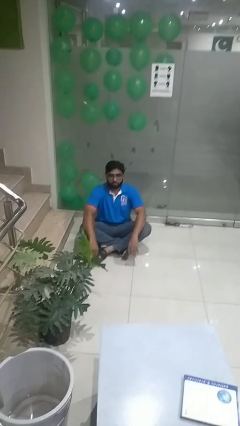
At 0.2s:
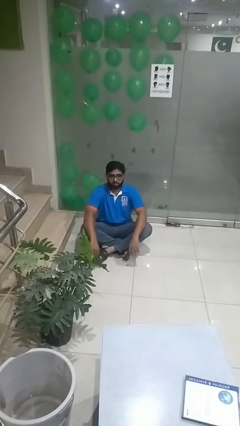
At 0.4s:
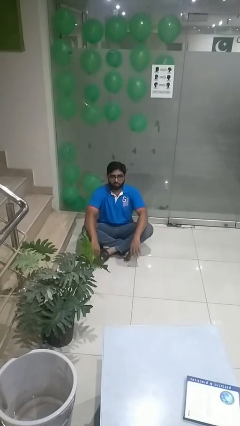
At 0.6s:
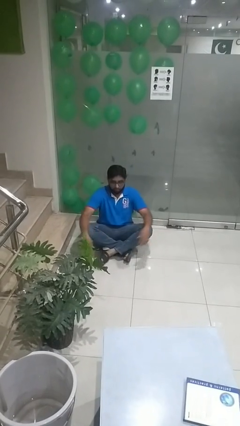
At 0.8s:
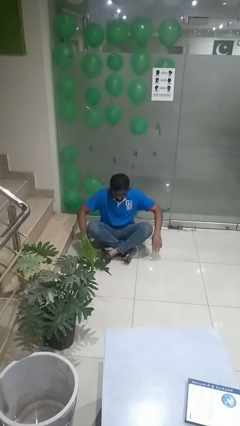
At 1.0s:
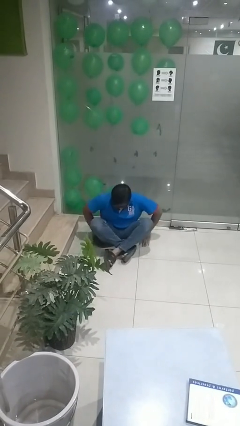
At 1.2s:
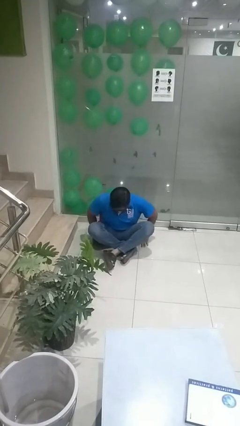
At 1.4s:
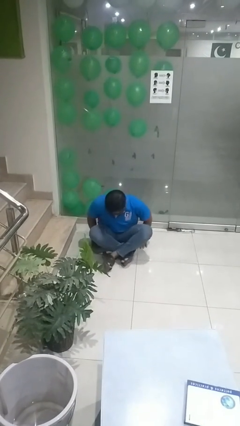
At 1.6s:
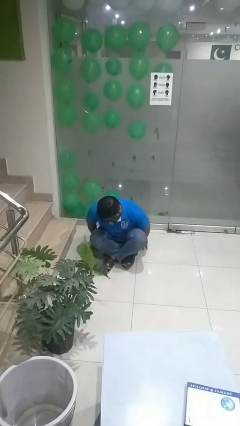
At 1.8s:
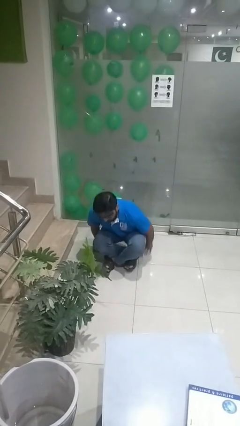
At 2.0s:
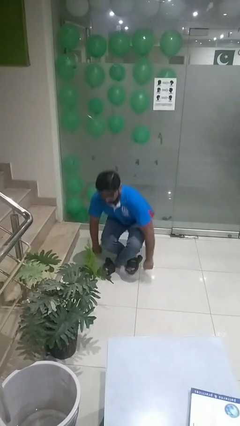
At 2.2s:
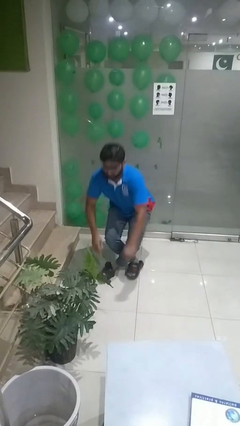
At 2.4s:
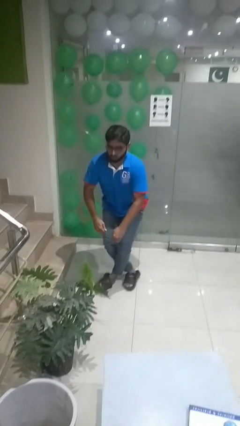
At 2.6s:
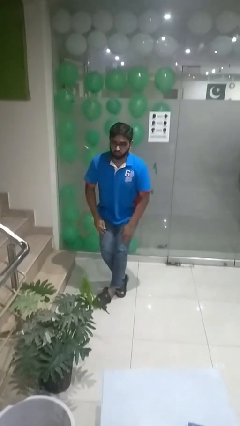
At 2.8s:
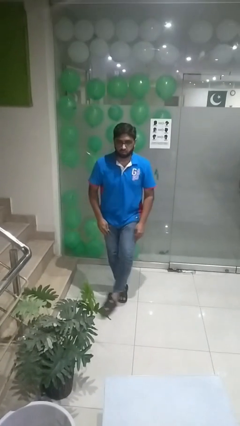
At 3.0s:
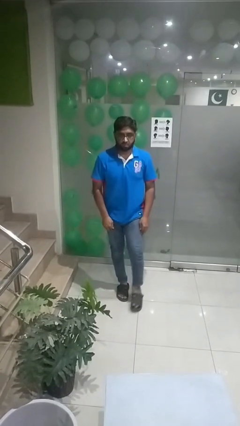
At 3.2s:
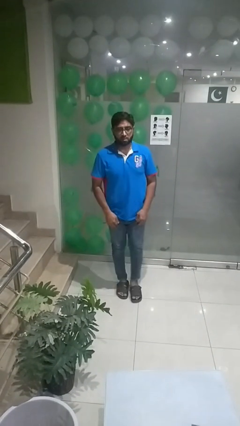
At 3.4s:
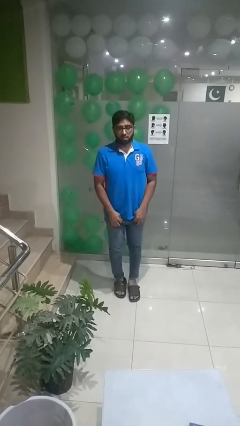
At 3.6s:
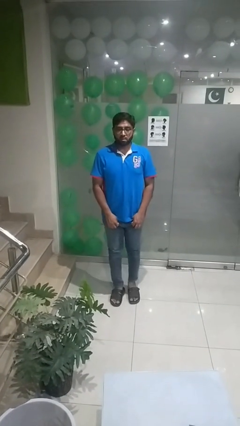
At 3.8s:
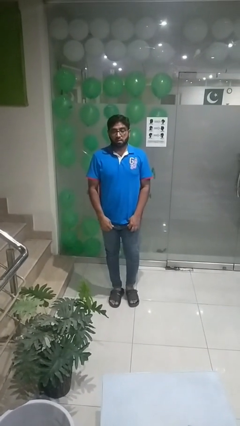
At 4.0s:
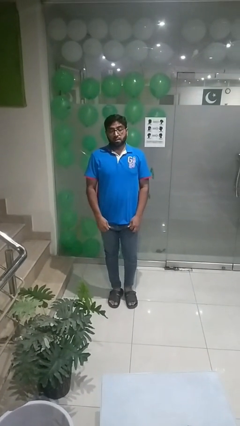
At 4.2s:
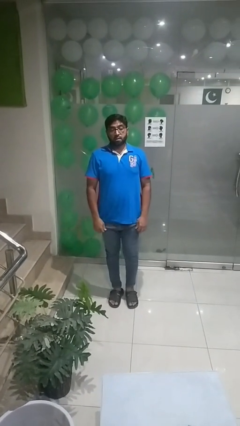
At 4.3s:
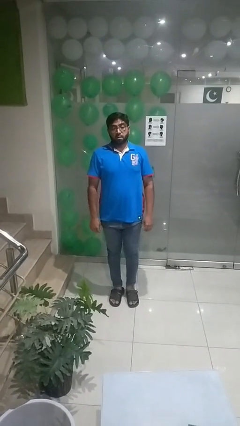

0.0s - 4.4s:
person stands up from floor

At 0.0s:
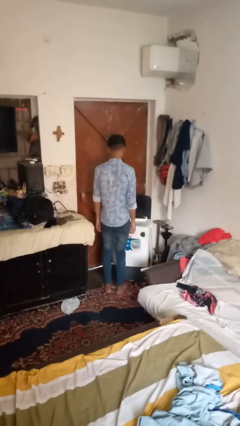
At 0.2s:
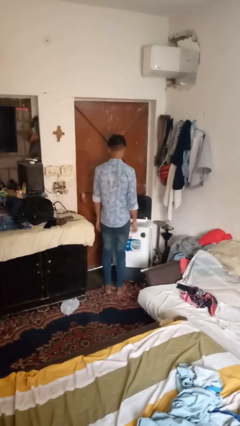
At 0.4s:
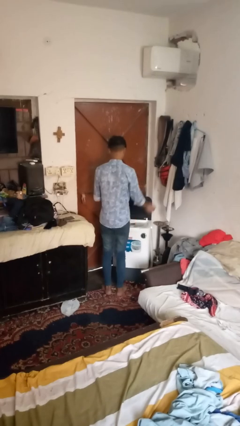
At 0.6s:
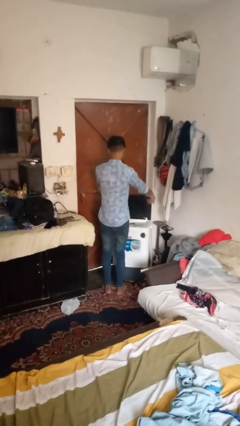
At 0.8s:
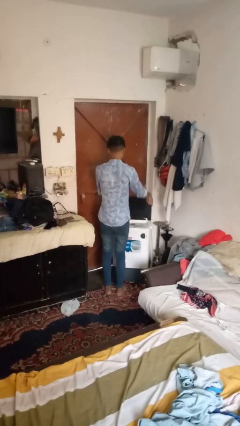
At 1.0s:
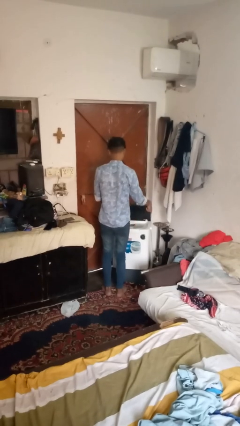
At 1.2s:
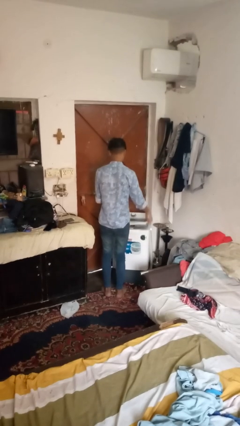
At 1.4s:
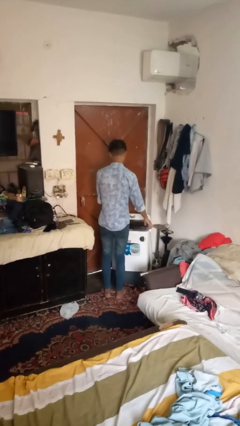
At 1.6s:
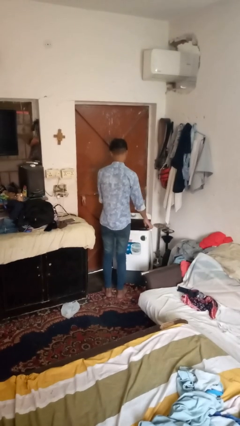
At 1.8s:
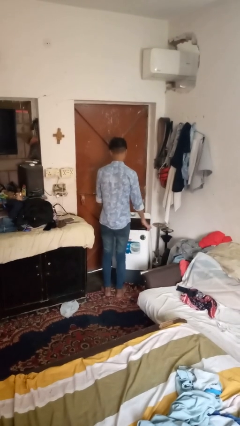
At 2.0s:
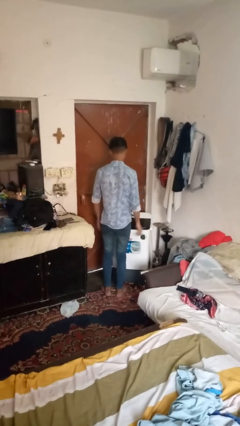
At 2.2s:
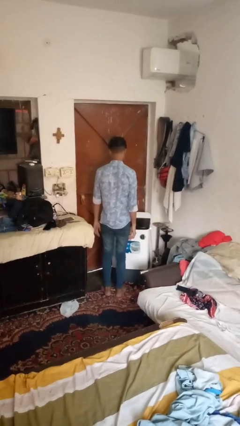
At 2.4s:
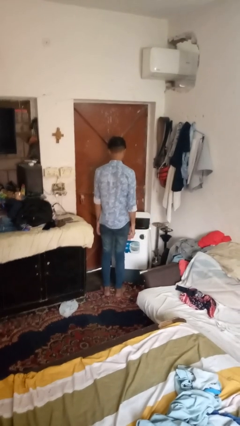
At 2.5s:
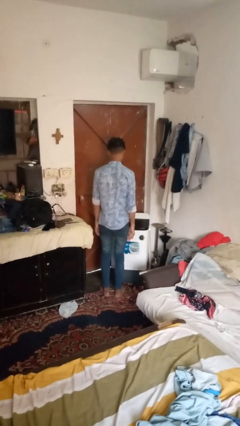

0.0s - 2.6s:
person closes clothes washer

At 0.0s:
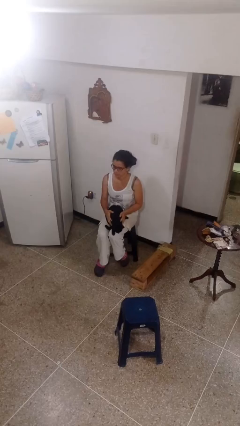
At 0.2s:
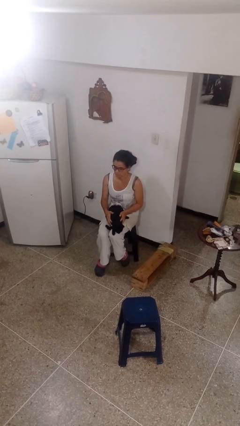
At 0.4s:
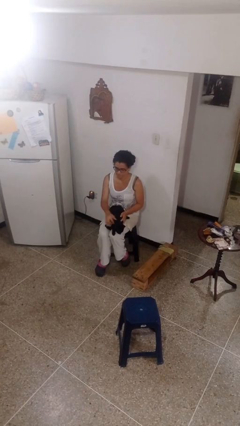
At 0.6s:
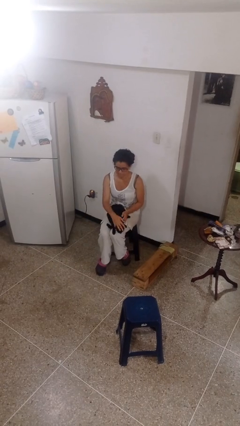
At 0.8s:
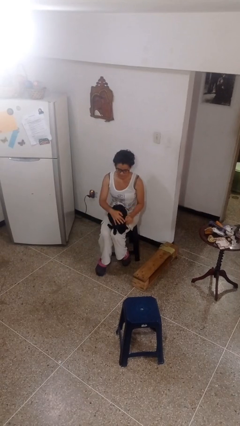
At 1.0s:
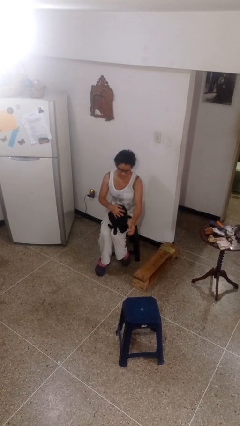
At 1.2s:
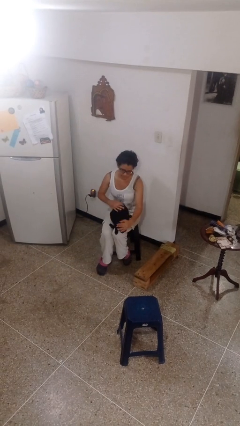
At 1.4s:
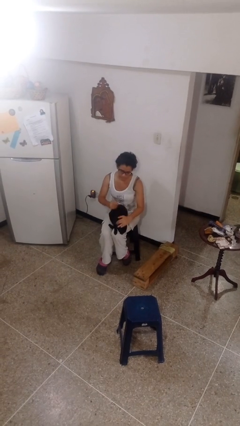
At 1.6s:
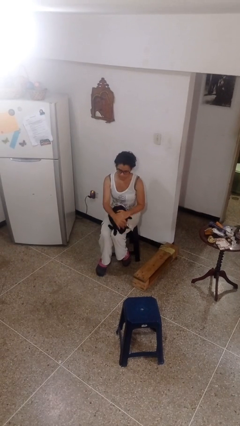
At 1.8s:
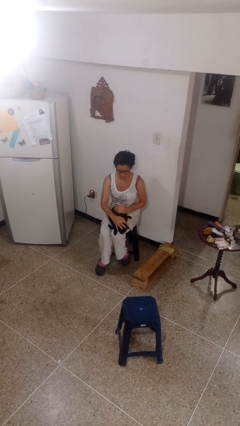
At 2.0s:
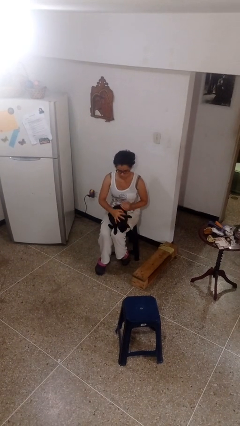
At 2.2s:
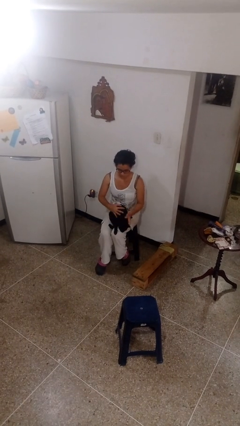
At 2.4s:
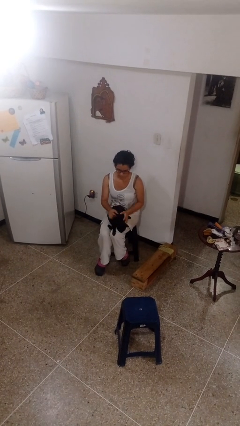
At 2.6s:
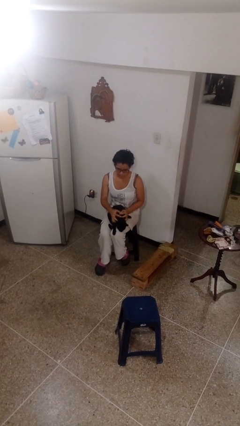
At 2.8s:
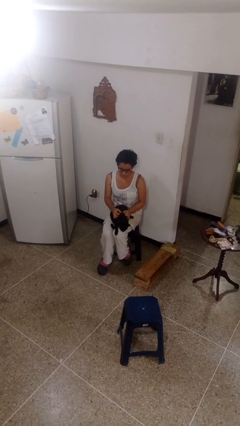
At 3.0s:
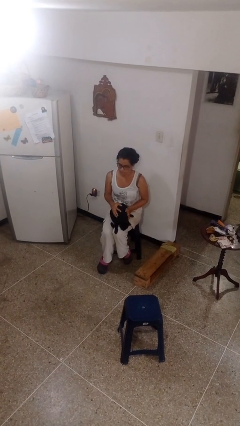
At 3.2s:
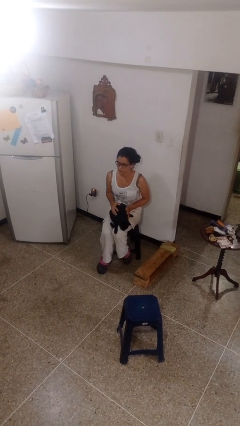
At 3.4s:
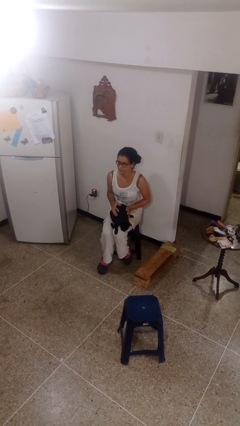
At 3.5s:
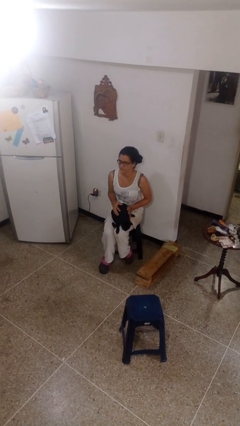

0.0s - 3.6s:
person pets cat

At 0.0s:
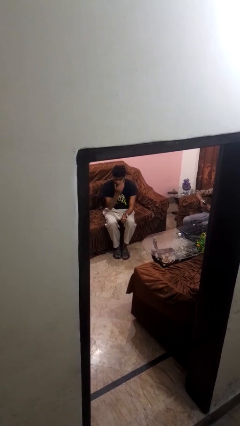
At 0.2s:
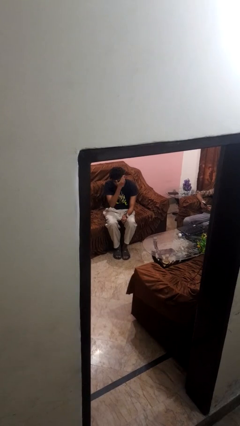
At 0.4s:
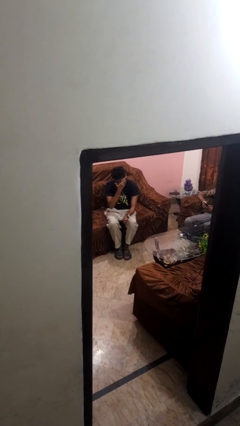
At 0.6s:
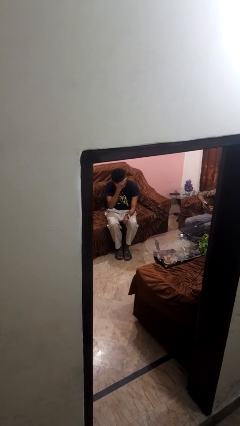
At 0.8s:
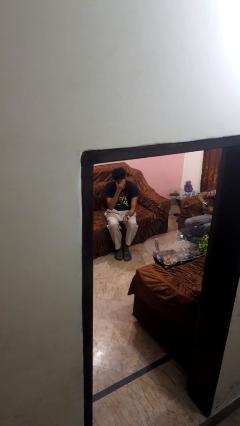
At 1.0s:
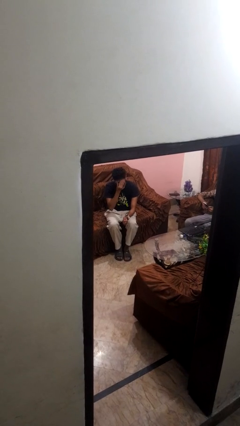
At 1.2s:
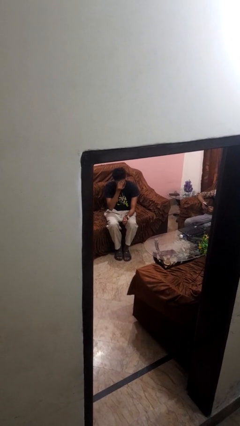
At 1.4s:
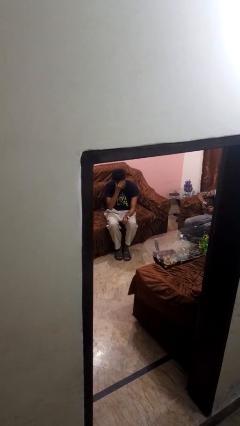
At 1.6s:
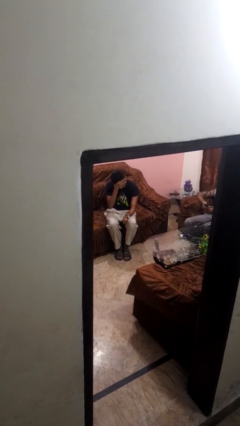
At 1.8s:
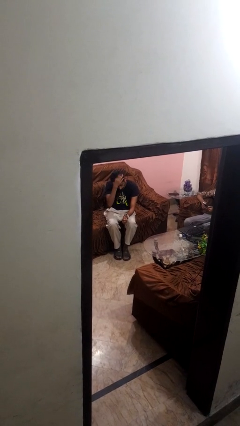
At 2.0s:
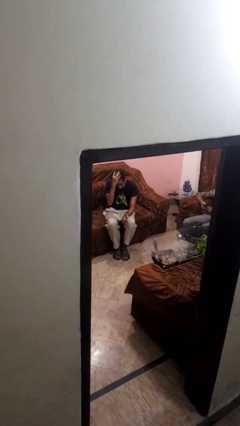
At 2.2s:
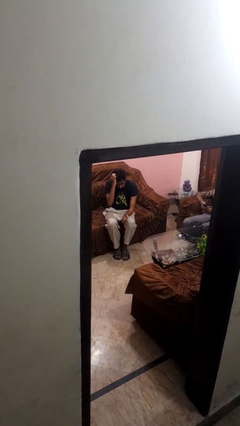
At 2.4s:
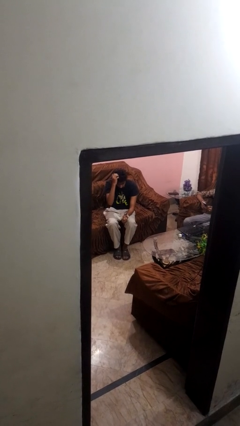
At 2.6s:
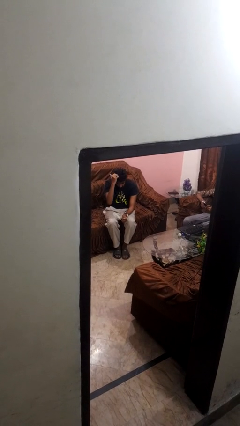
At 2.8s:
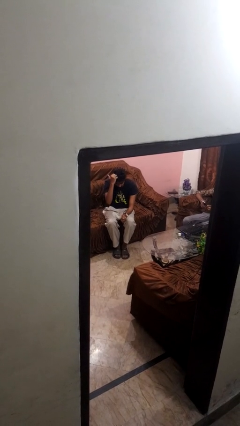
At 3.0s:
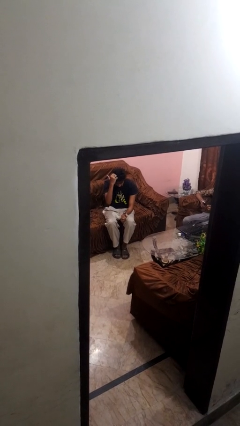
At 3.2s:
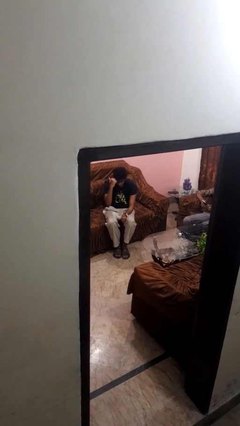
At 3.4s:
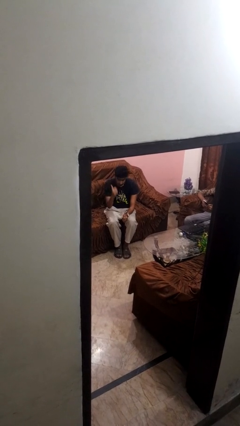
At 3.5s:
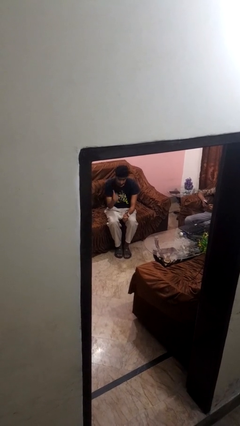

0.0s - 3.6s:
person scratches face

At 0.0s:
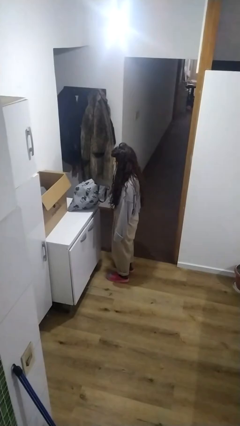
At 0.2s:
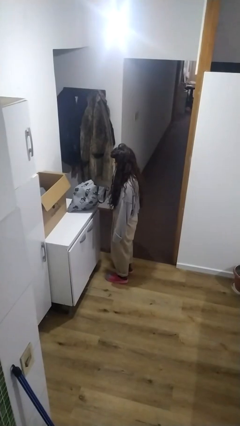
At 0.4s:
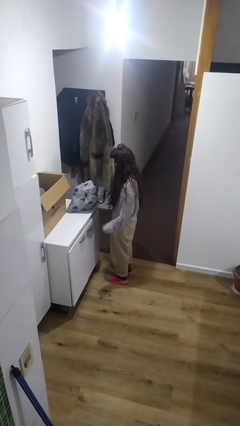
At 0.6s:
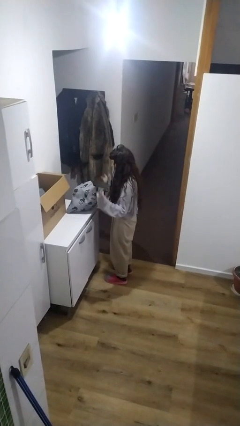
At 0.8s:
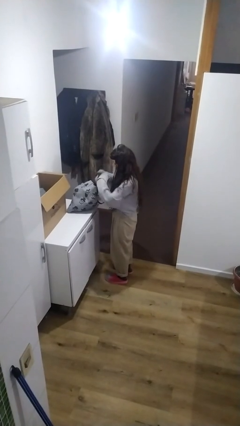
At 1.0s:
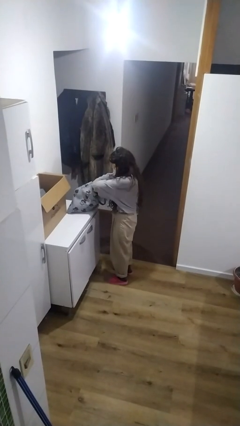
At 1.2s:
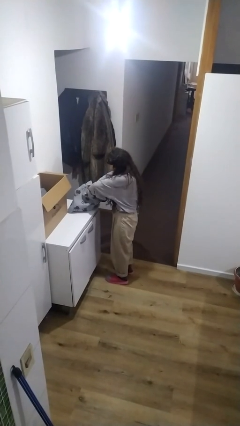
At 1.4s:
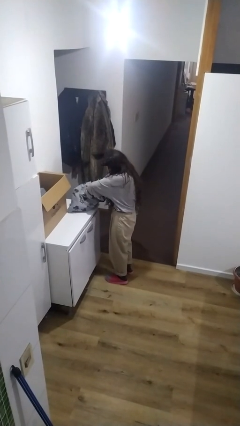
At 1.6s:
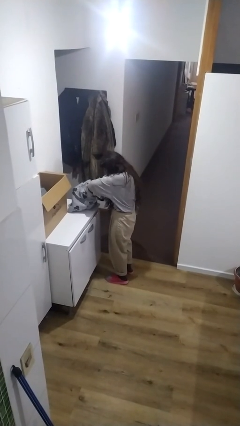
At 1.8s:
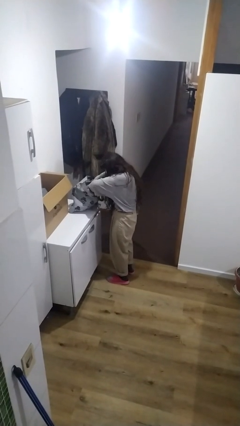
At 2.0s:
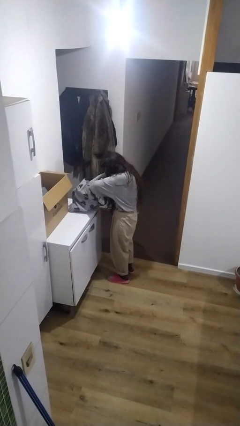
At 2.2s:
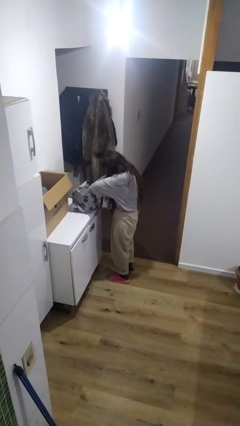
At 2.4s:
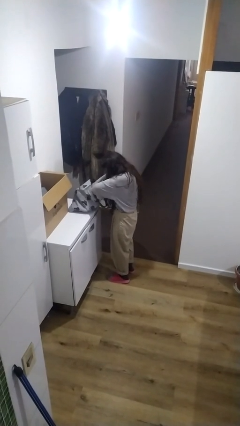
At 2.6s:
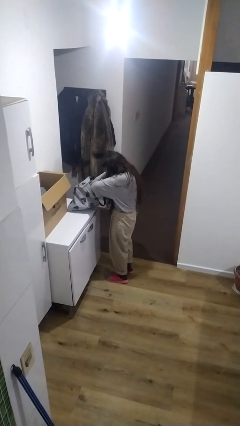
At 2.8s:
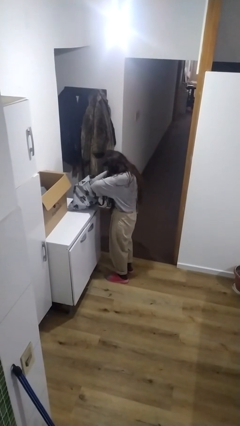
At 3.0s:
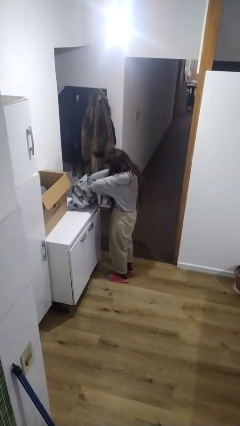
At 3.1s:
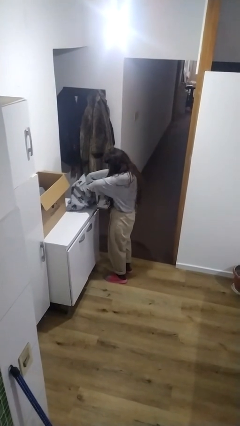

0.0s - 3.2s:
person searches in bag

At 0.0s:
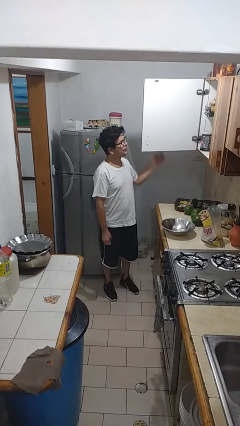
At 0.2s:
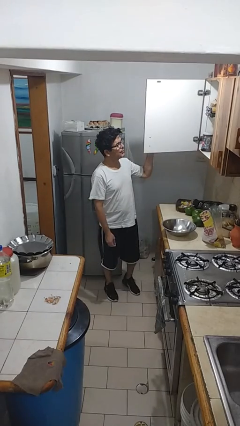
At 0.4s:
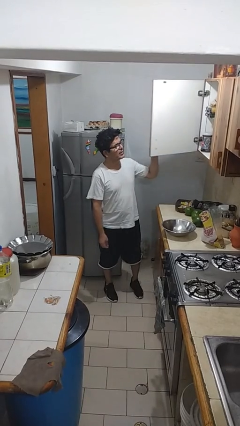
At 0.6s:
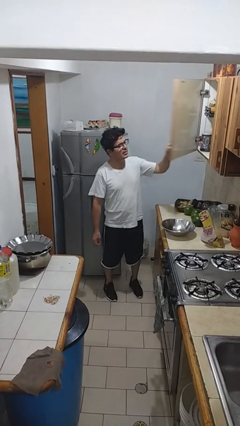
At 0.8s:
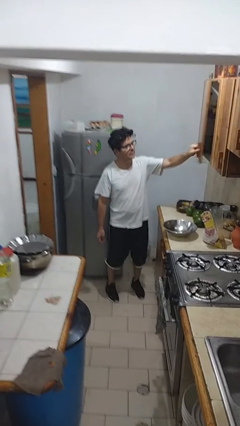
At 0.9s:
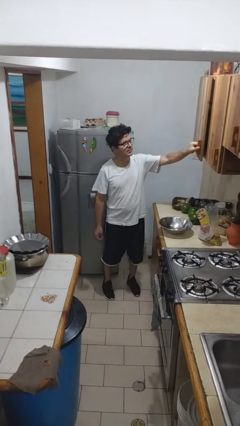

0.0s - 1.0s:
person closes kitchen drawer
